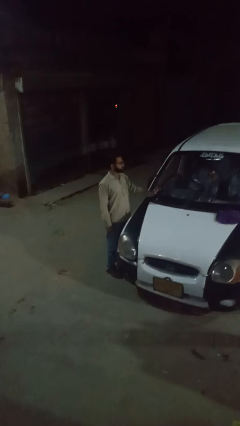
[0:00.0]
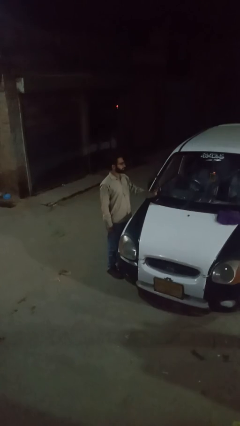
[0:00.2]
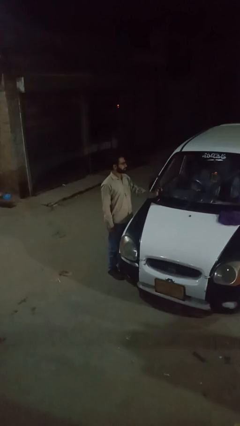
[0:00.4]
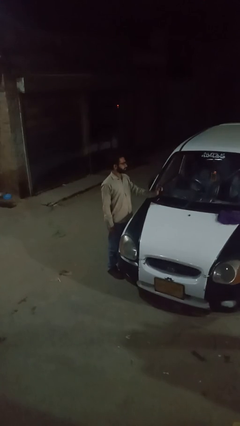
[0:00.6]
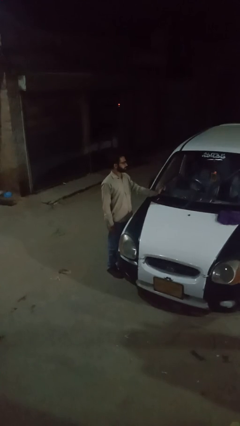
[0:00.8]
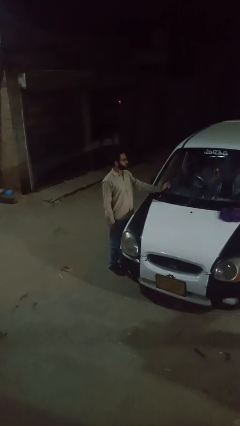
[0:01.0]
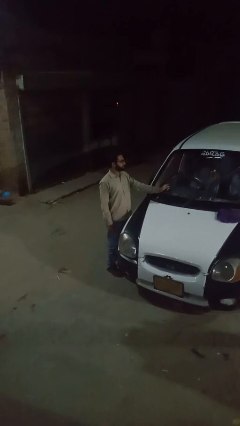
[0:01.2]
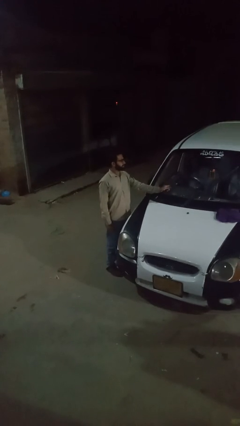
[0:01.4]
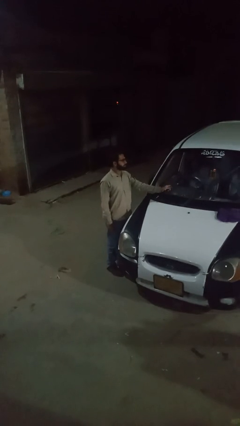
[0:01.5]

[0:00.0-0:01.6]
person flips down car wipers

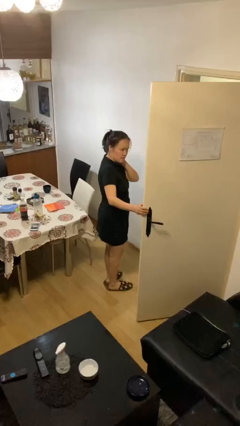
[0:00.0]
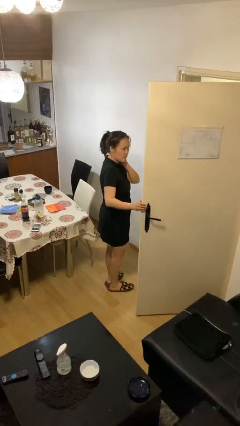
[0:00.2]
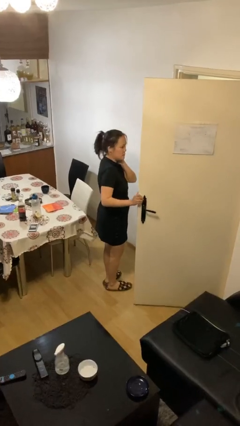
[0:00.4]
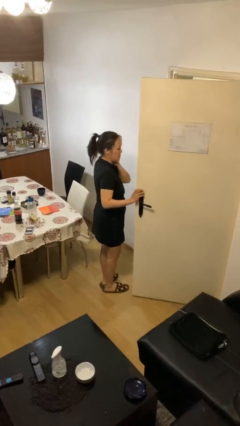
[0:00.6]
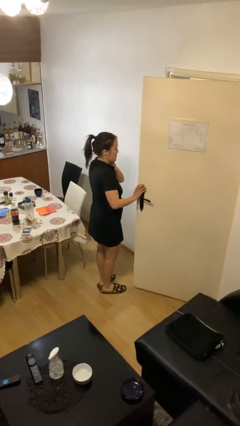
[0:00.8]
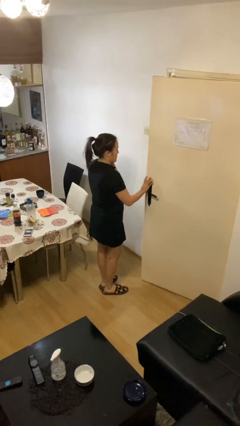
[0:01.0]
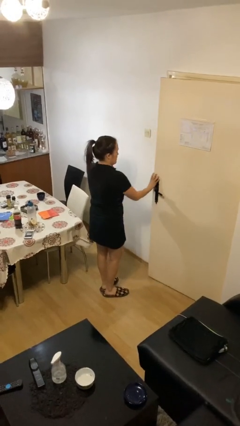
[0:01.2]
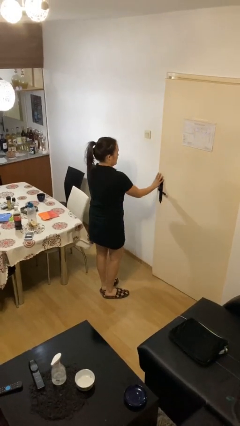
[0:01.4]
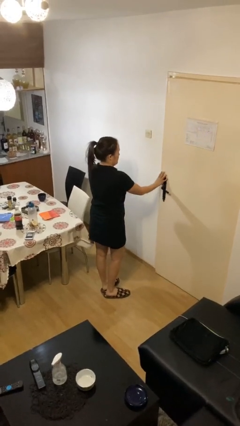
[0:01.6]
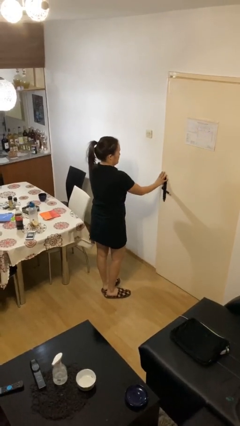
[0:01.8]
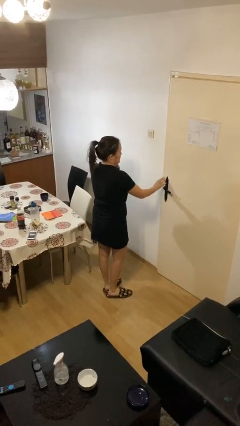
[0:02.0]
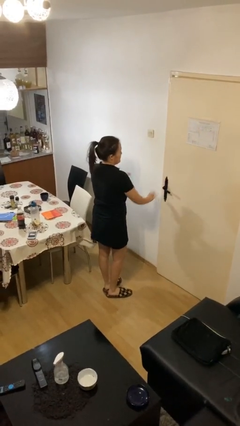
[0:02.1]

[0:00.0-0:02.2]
person closes facility door

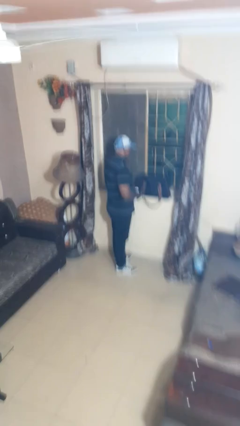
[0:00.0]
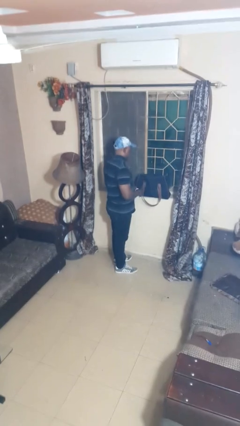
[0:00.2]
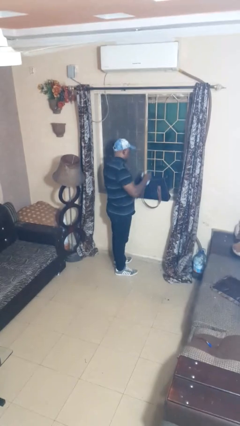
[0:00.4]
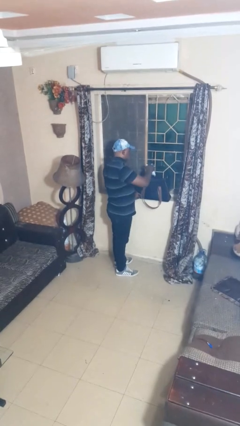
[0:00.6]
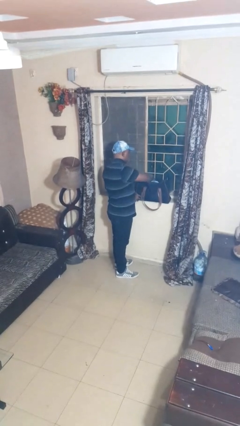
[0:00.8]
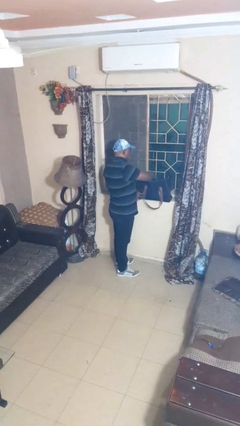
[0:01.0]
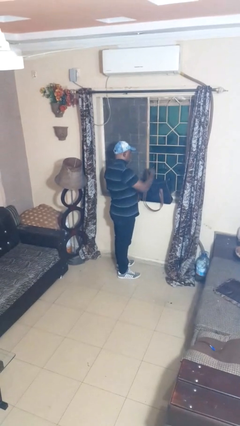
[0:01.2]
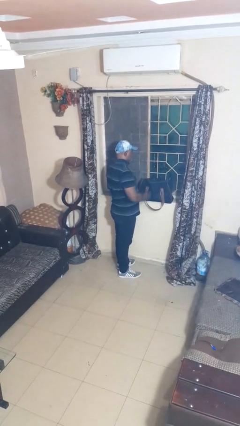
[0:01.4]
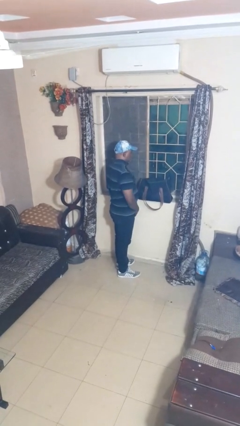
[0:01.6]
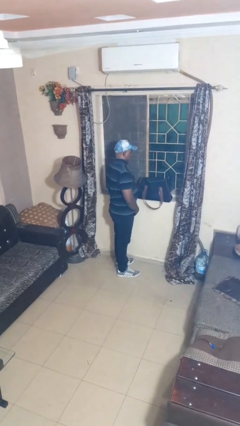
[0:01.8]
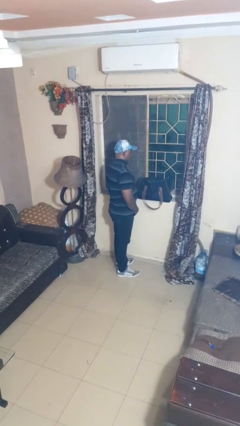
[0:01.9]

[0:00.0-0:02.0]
person puts object into bag

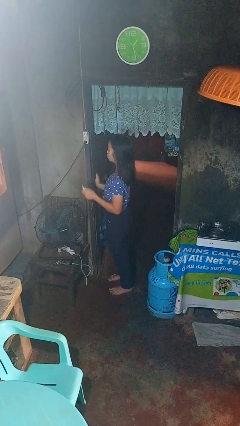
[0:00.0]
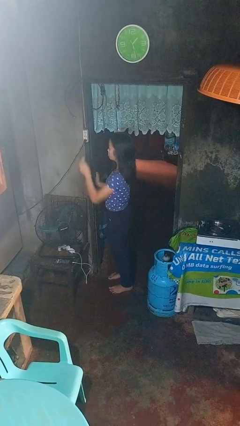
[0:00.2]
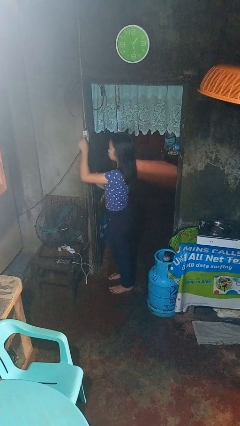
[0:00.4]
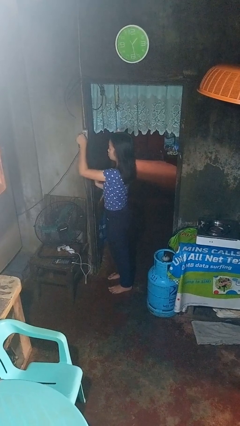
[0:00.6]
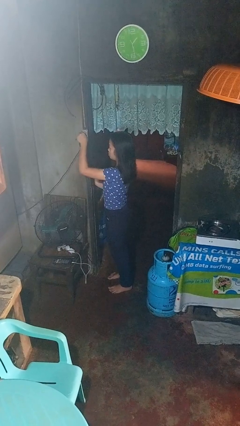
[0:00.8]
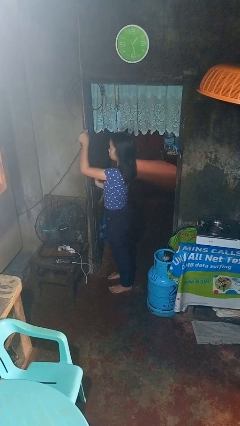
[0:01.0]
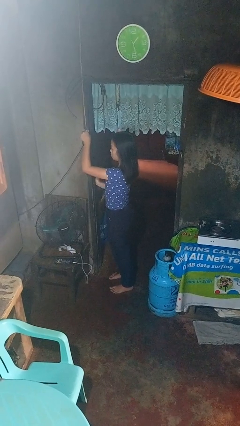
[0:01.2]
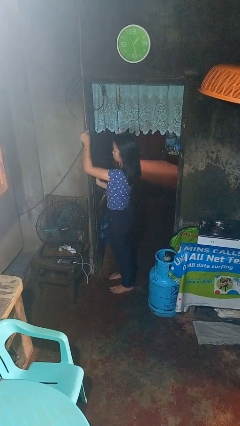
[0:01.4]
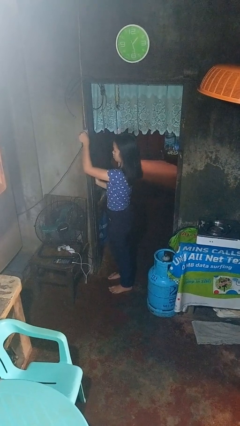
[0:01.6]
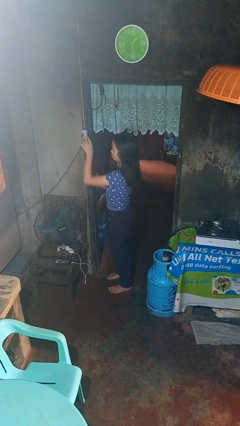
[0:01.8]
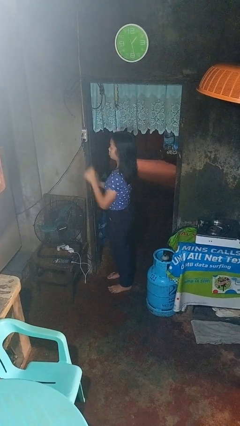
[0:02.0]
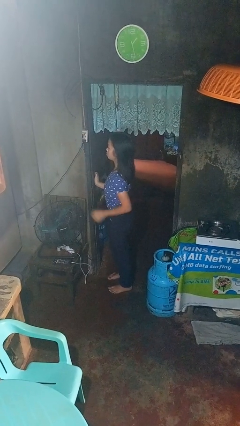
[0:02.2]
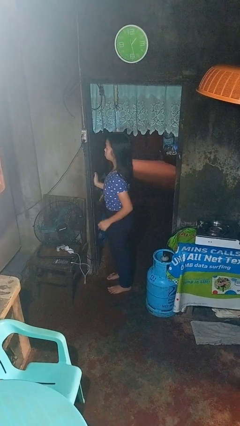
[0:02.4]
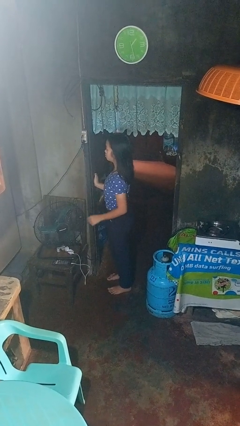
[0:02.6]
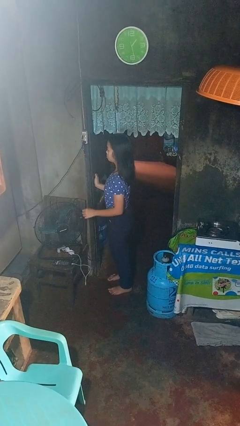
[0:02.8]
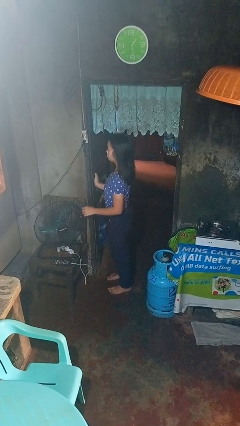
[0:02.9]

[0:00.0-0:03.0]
person plugs into electrical socket

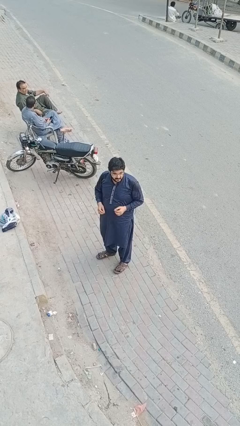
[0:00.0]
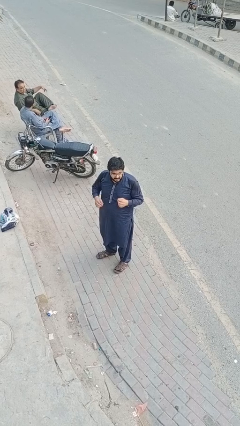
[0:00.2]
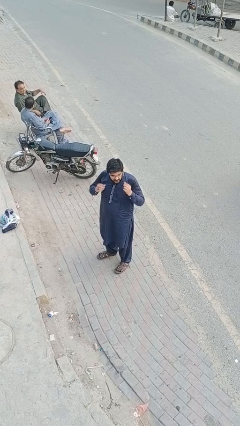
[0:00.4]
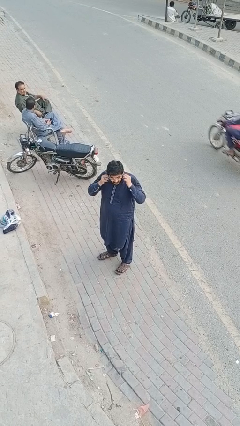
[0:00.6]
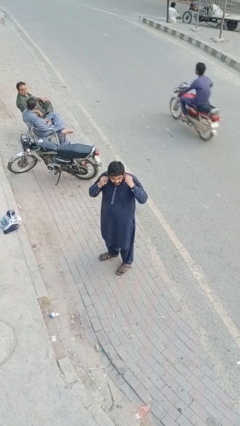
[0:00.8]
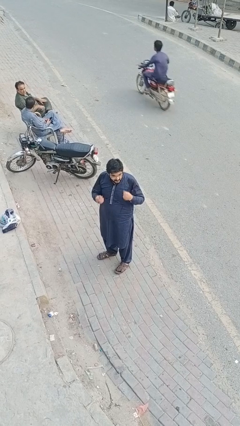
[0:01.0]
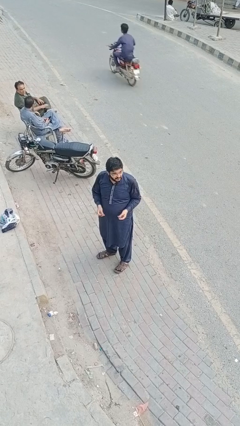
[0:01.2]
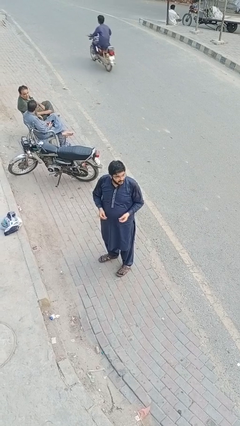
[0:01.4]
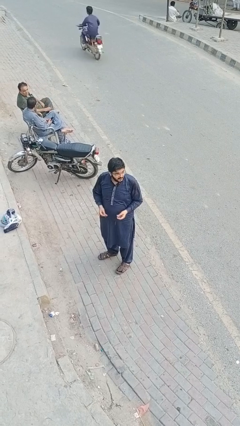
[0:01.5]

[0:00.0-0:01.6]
person takes off headphones

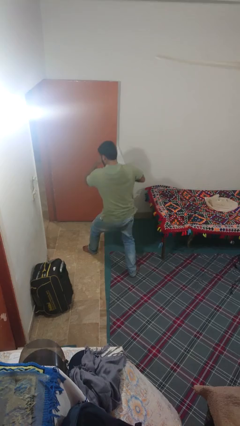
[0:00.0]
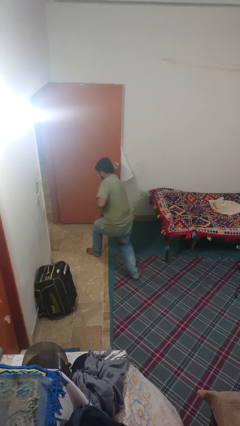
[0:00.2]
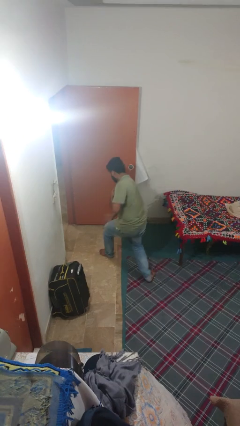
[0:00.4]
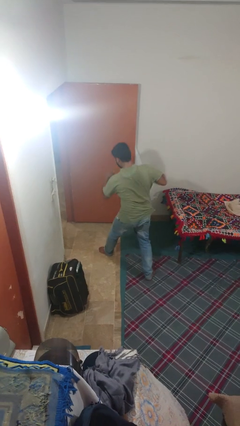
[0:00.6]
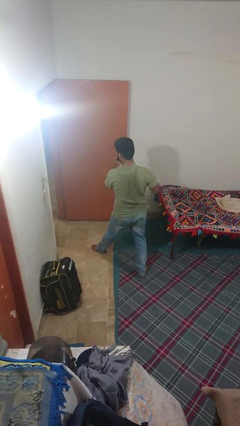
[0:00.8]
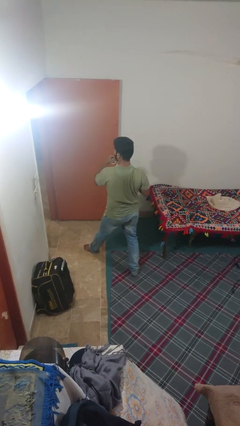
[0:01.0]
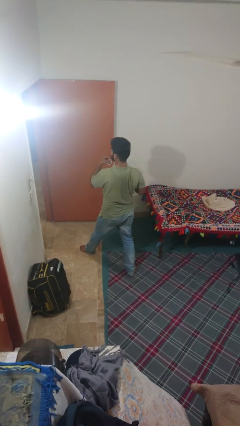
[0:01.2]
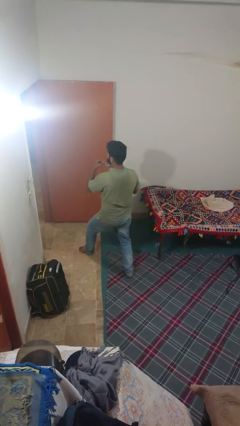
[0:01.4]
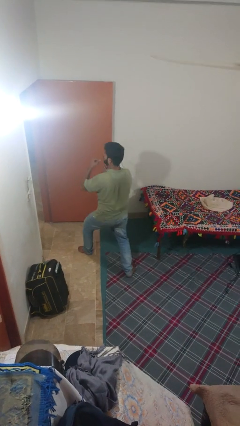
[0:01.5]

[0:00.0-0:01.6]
person karate chop

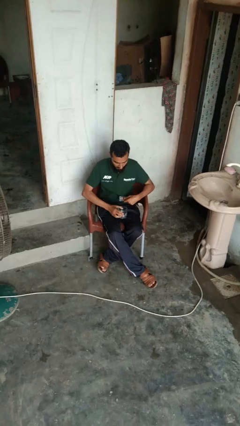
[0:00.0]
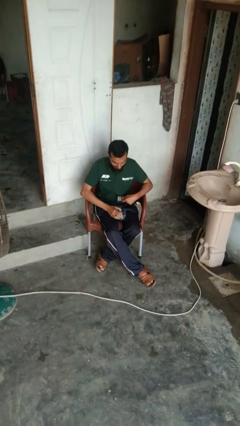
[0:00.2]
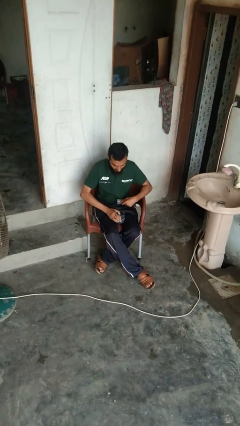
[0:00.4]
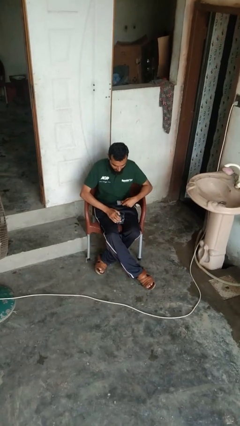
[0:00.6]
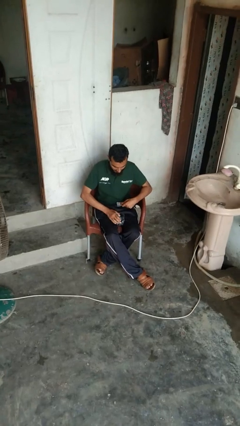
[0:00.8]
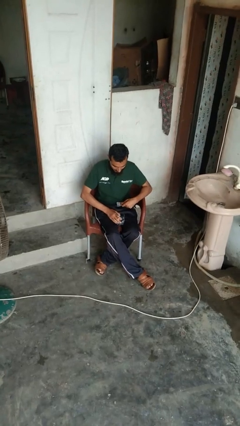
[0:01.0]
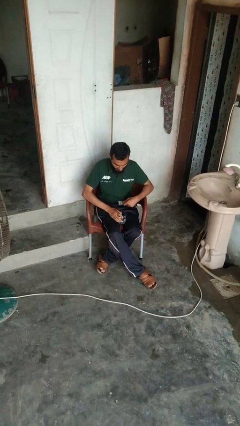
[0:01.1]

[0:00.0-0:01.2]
person drinks from cup

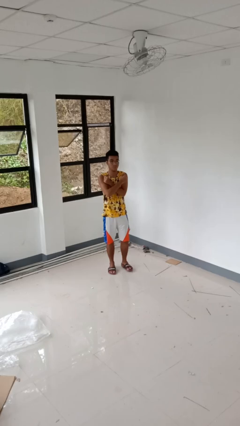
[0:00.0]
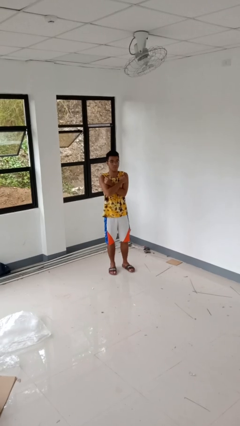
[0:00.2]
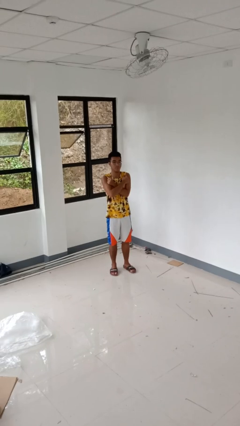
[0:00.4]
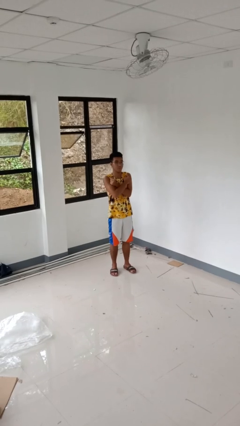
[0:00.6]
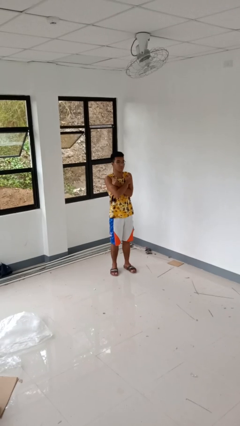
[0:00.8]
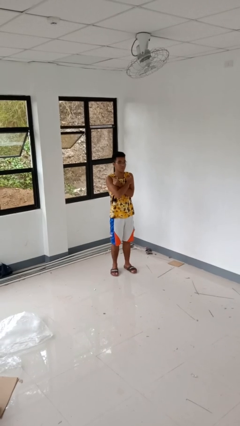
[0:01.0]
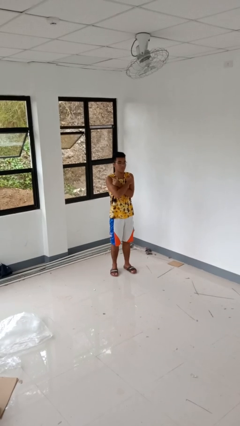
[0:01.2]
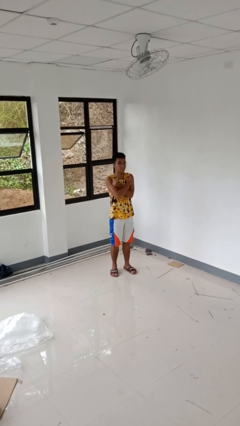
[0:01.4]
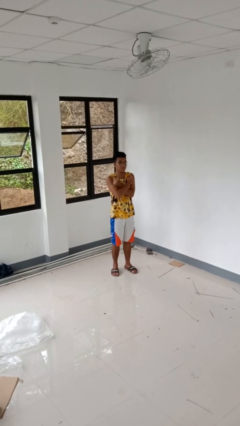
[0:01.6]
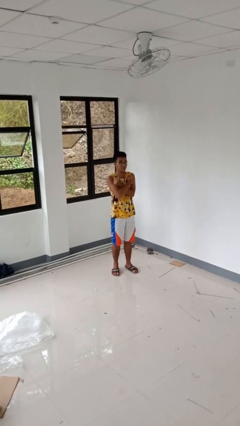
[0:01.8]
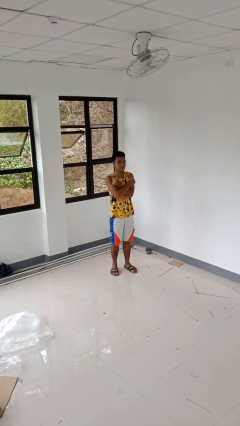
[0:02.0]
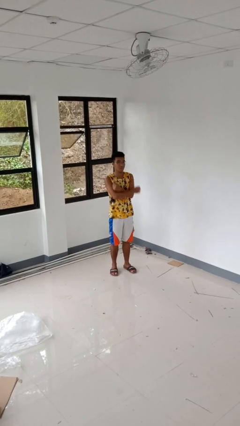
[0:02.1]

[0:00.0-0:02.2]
person gestures arms x

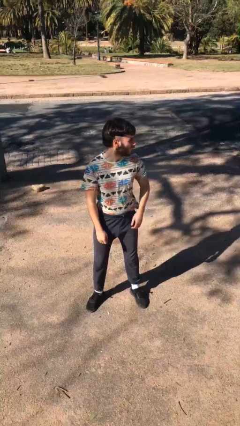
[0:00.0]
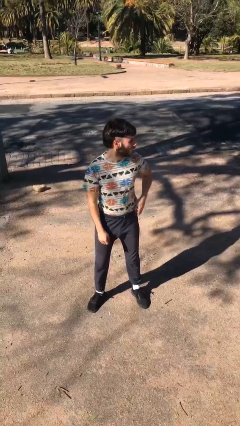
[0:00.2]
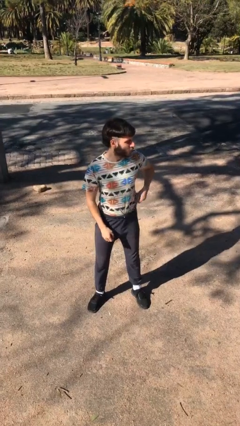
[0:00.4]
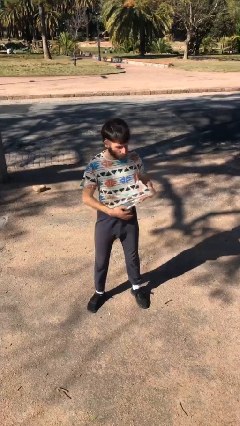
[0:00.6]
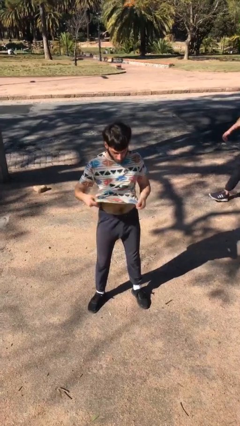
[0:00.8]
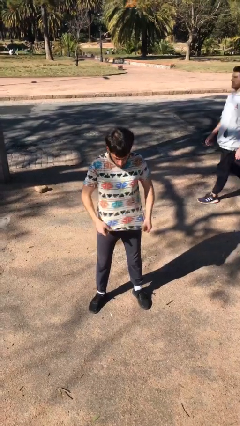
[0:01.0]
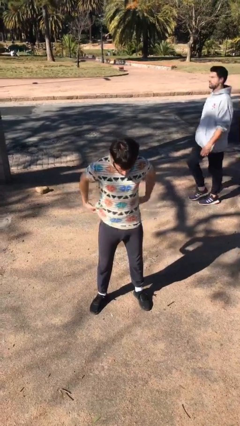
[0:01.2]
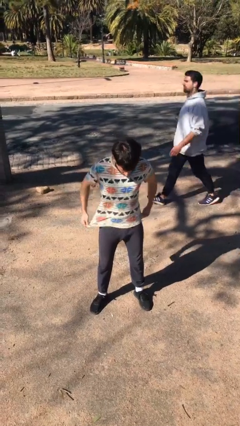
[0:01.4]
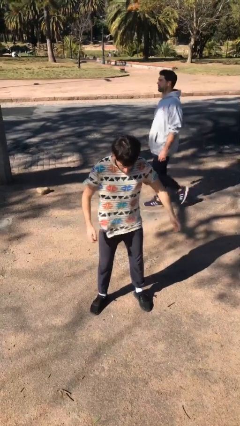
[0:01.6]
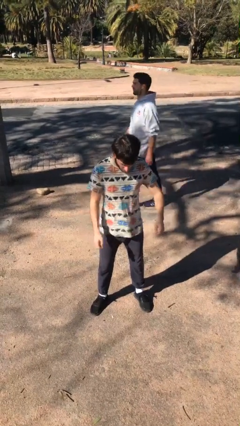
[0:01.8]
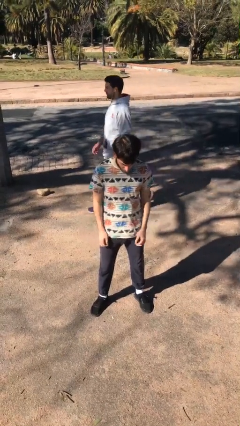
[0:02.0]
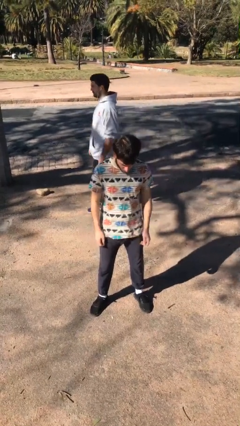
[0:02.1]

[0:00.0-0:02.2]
person untucks shirt
